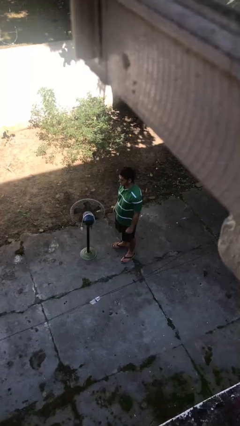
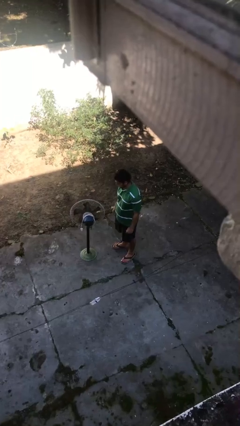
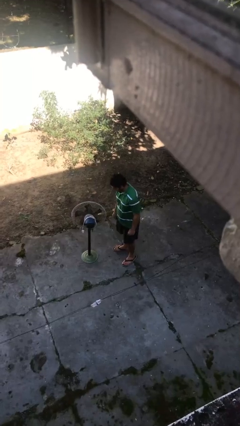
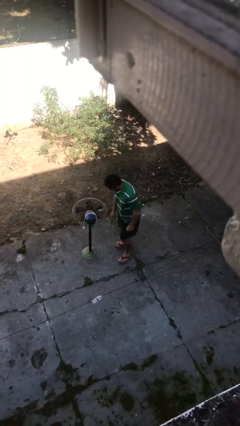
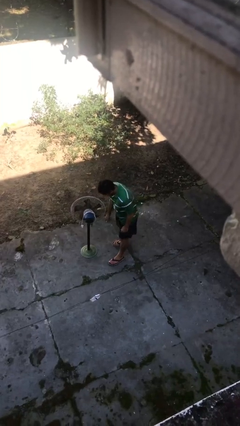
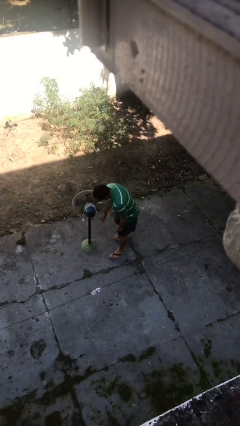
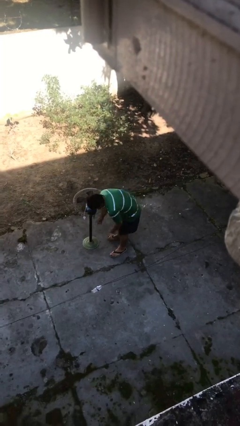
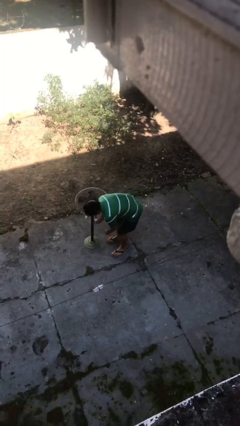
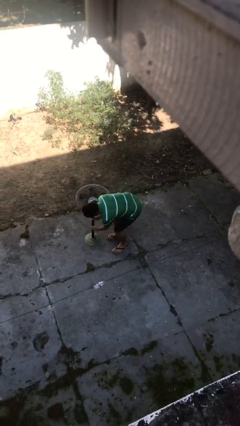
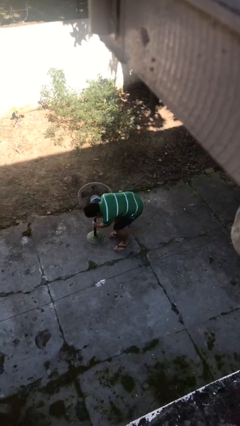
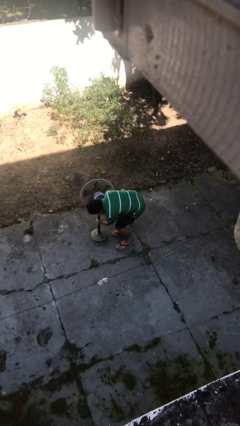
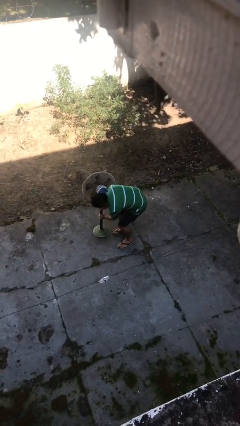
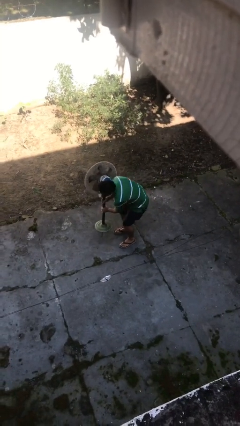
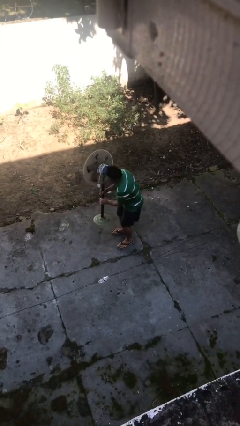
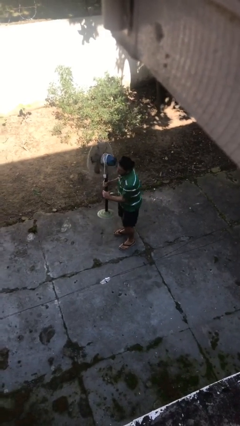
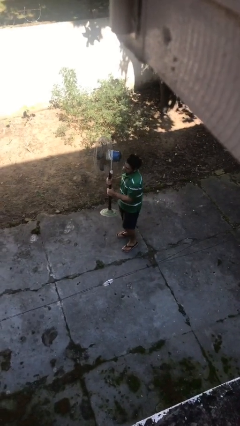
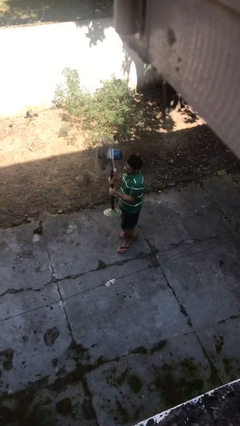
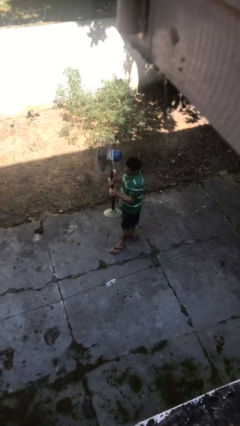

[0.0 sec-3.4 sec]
person picks up object from floor

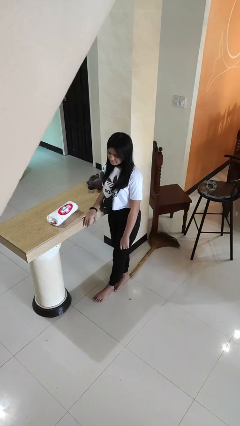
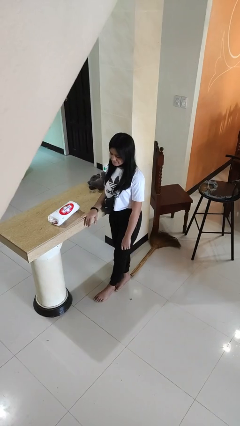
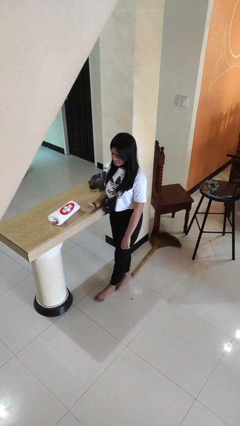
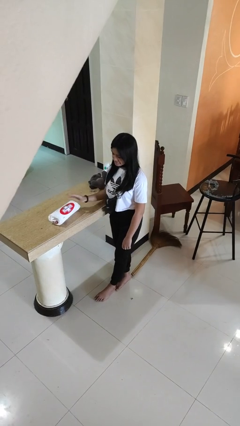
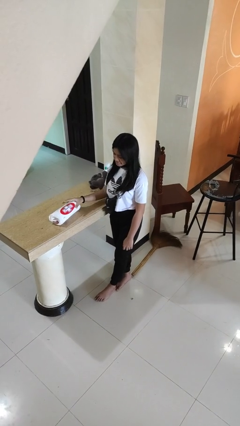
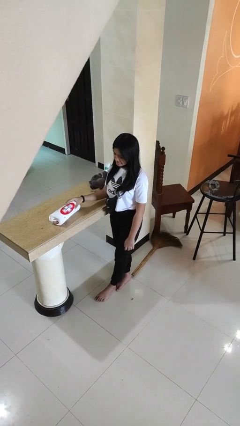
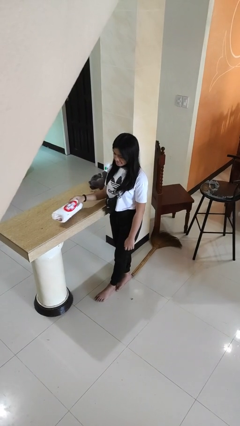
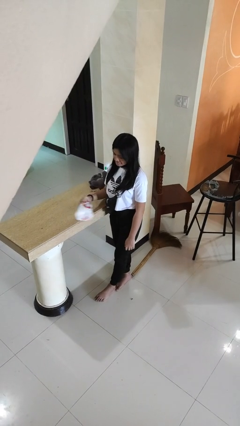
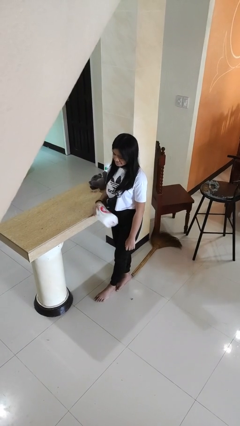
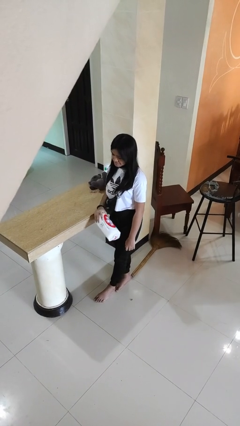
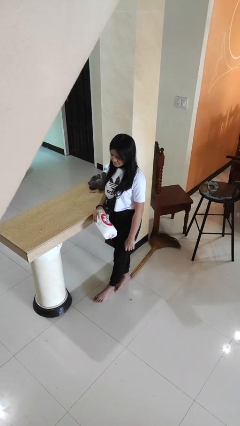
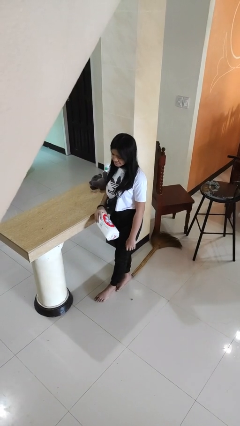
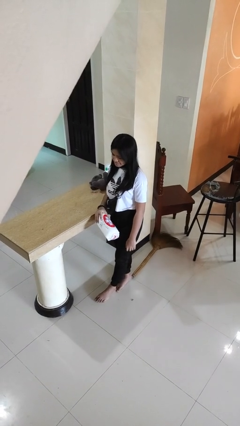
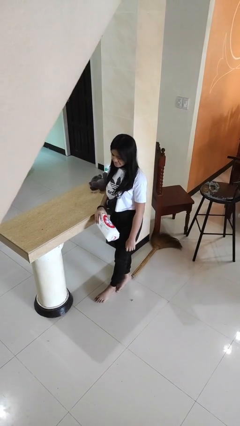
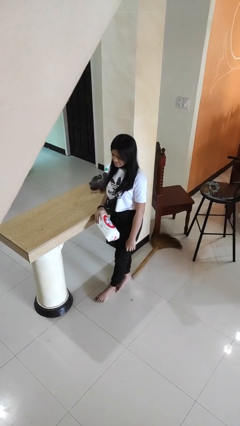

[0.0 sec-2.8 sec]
person picks up object from countertop

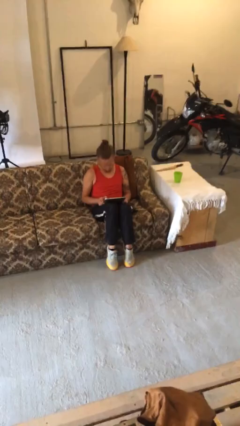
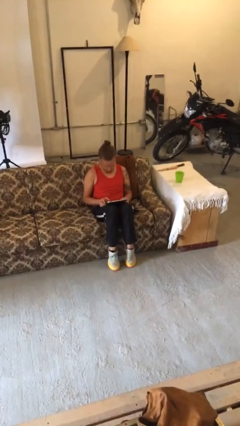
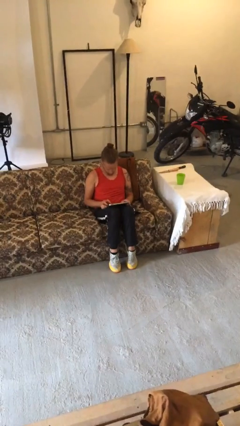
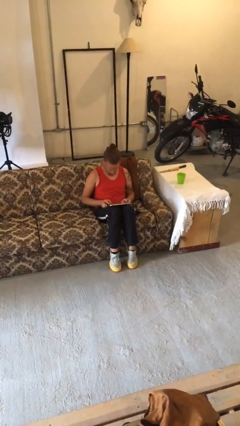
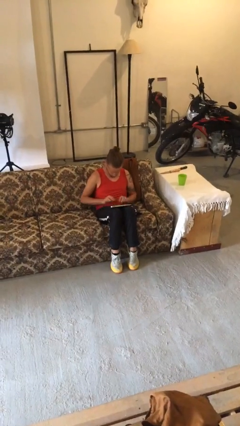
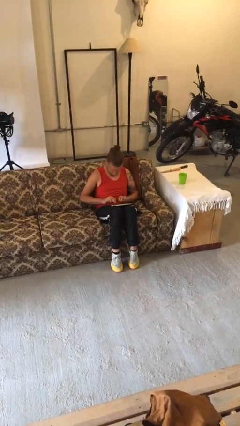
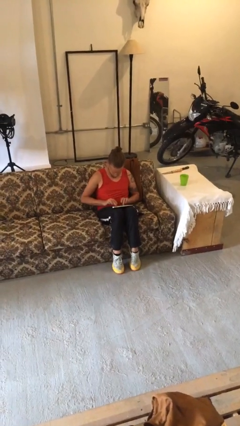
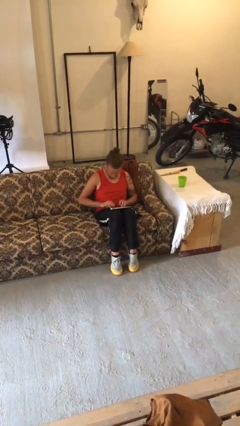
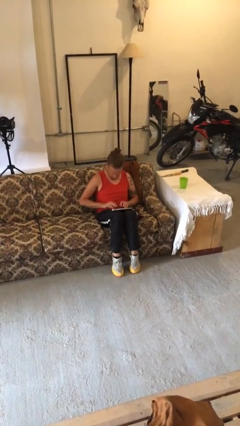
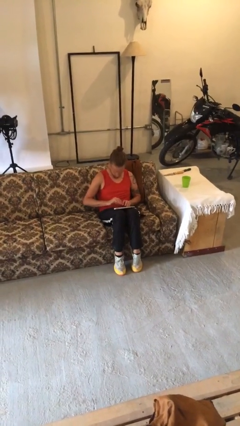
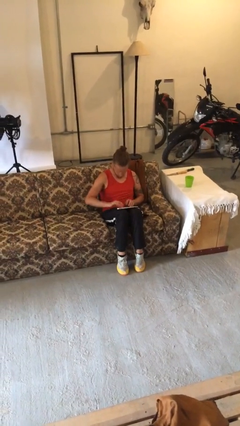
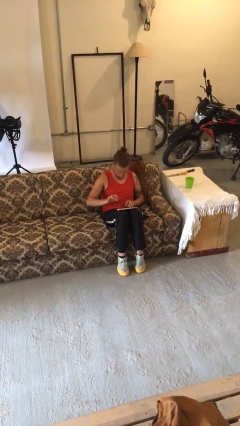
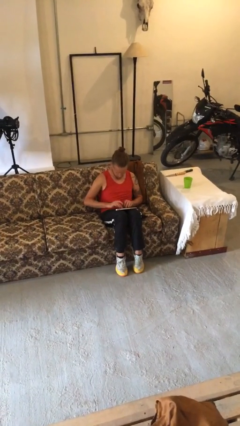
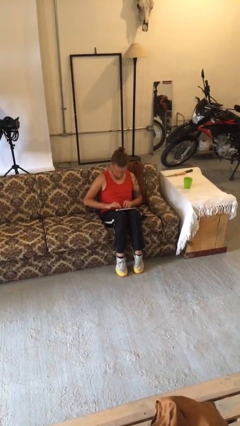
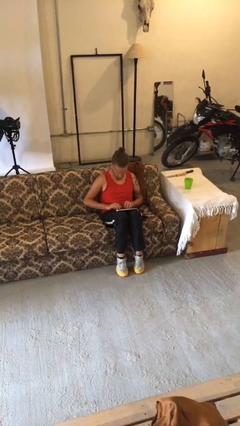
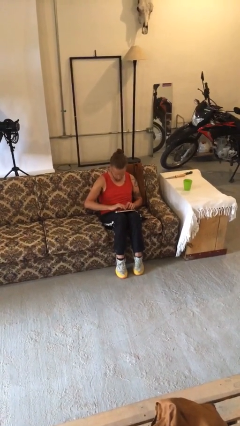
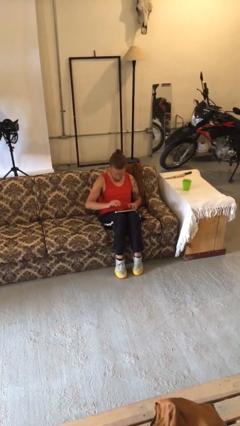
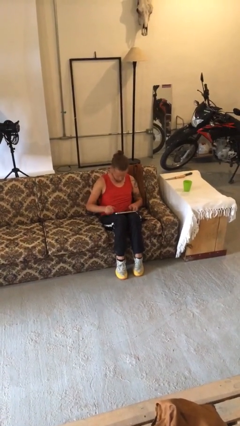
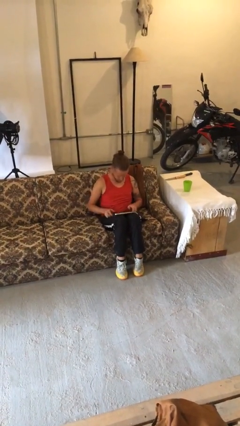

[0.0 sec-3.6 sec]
person interacts with tablet

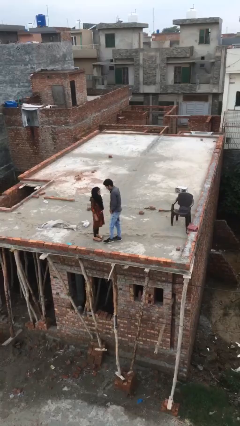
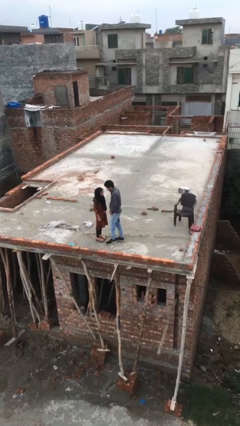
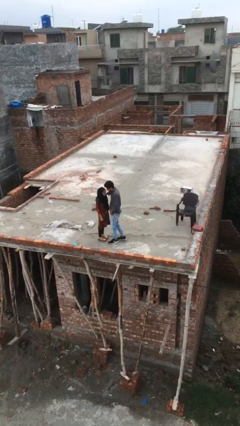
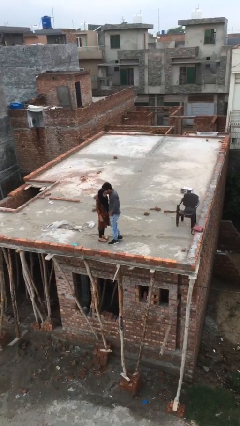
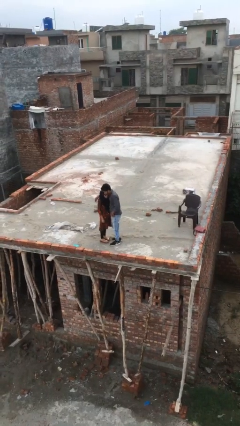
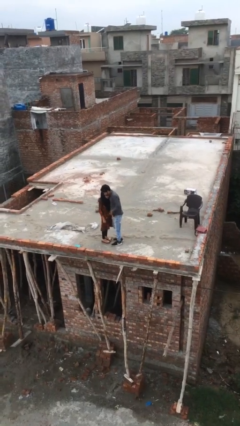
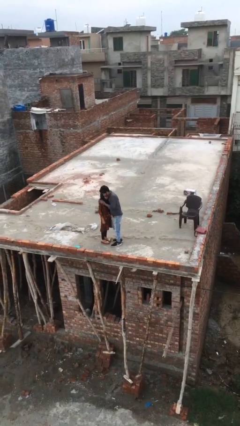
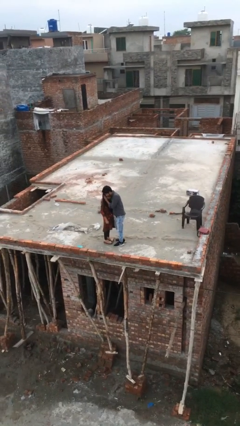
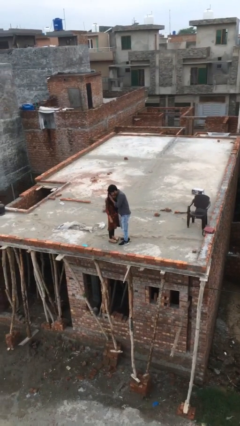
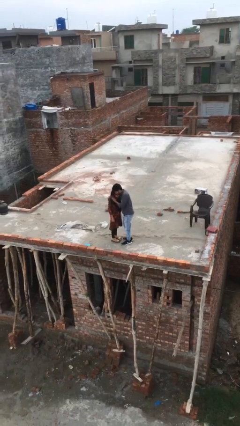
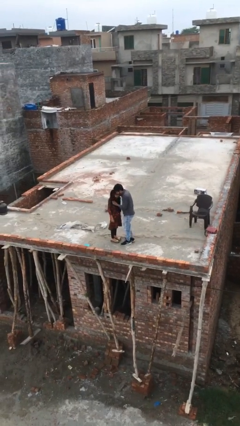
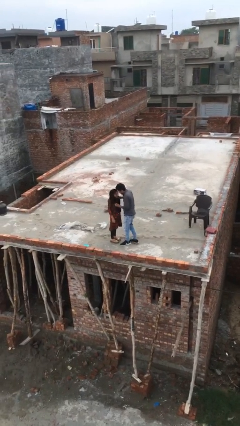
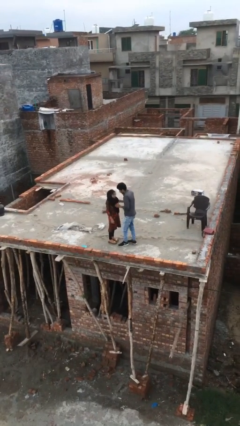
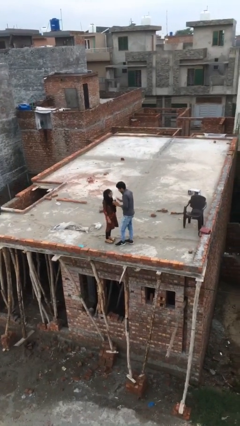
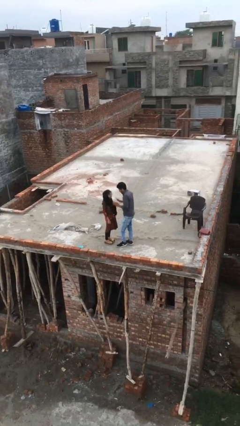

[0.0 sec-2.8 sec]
person embraces person

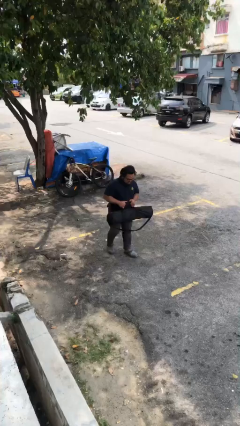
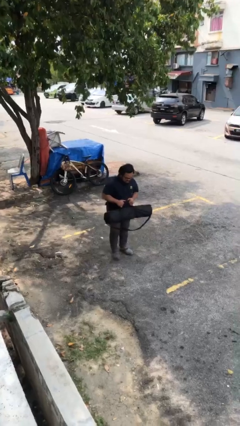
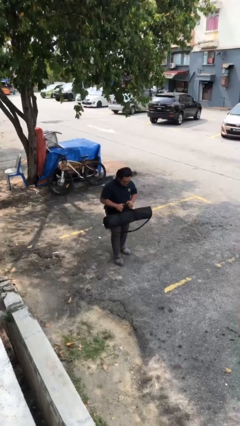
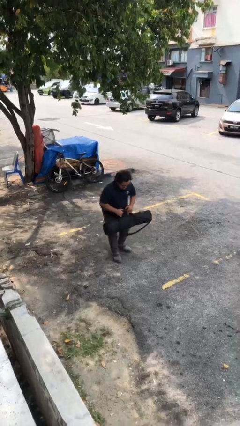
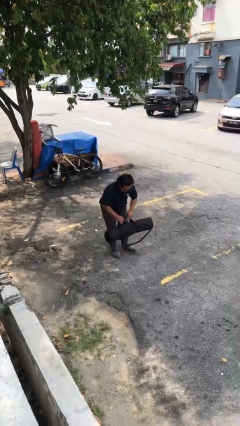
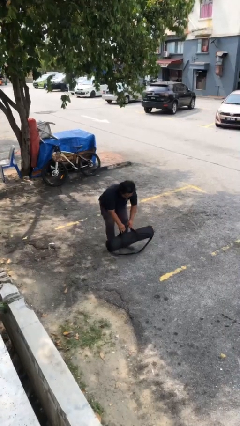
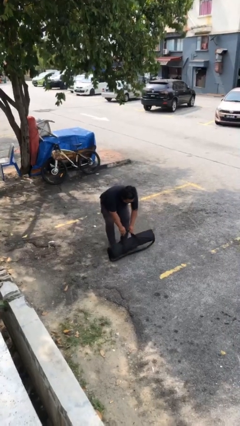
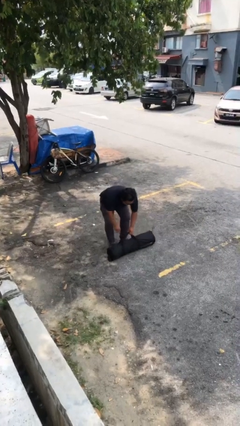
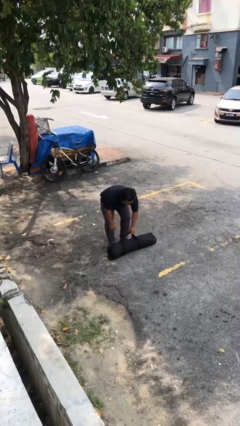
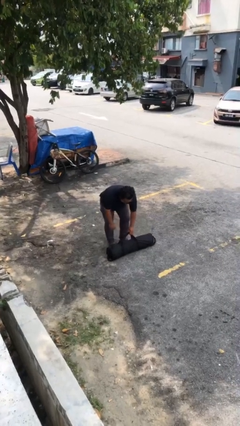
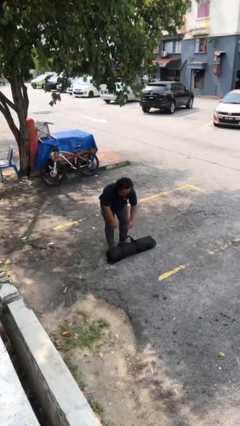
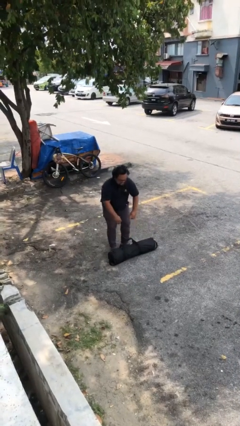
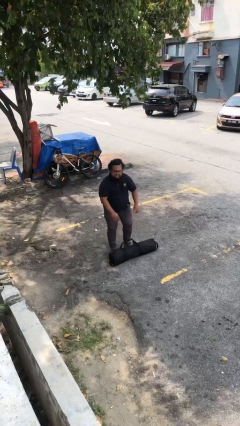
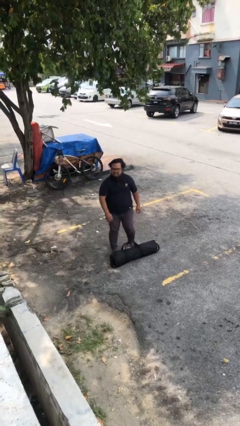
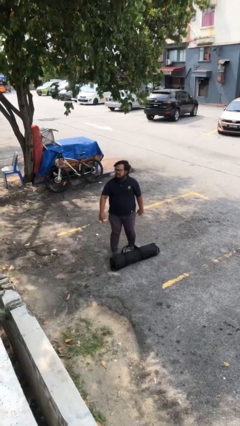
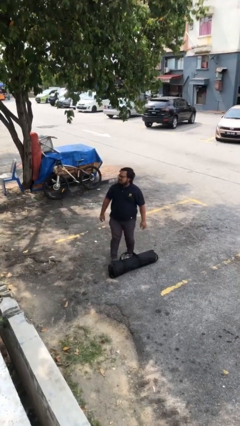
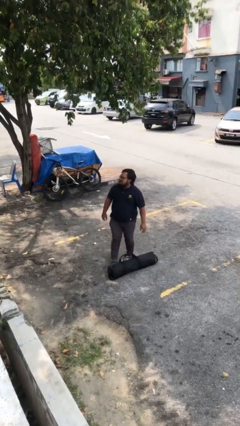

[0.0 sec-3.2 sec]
person puts down object on floor

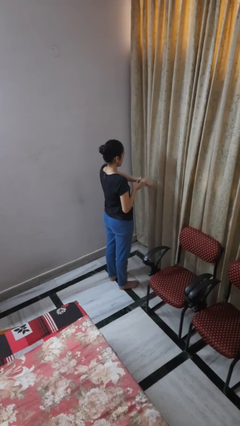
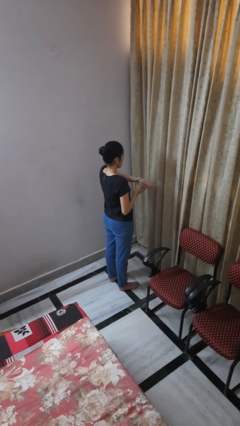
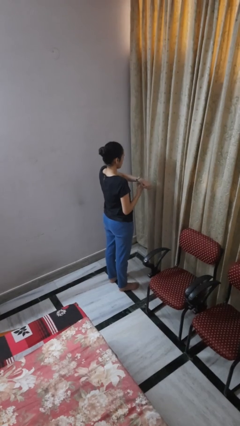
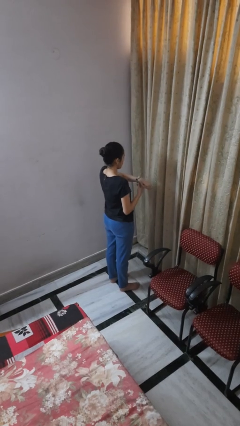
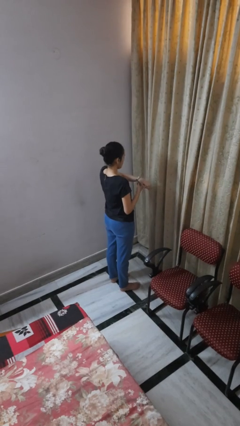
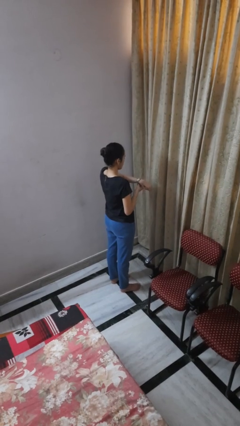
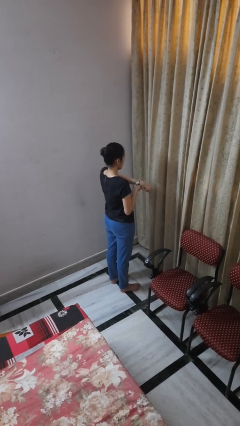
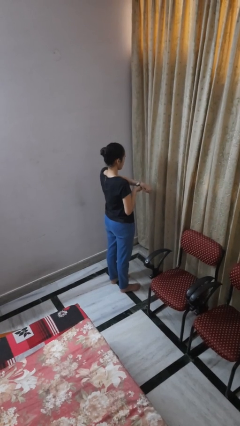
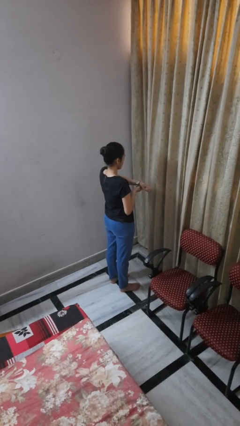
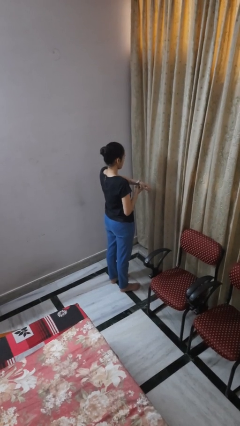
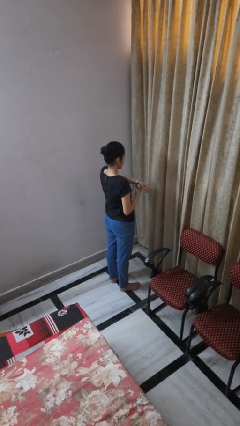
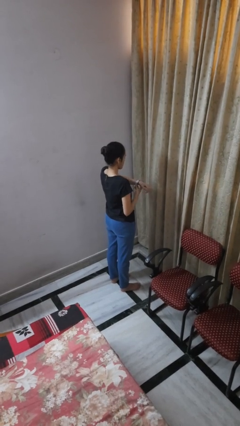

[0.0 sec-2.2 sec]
person puts on wristwatch
